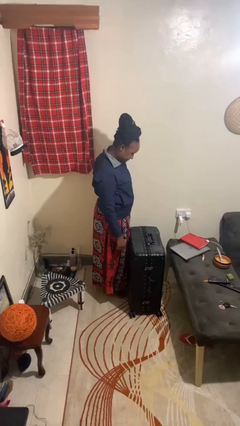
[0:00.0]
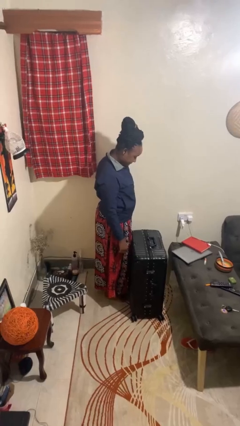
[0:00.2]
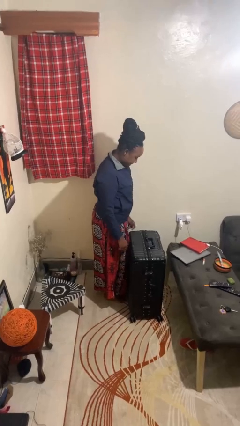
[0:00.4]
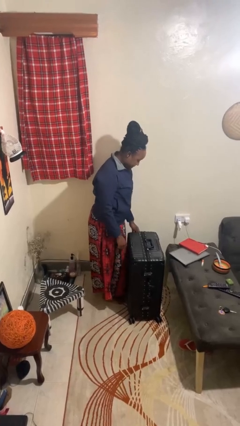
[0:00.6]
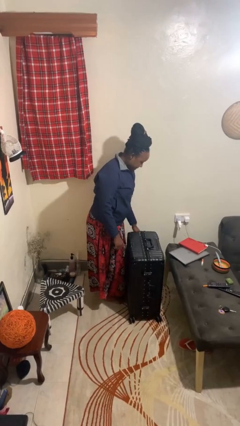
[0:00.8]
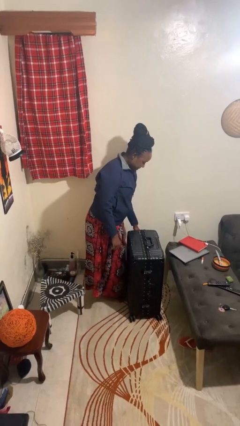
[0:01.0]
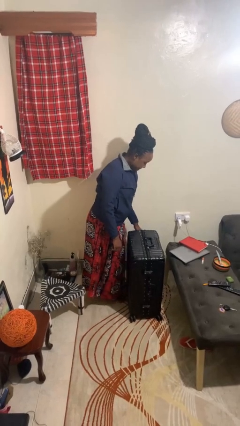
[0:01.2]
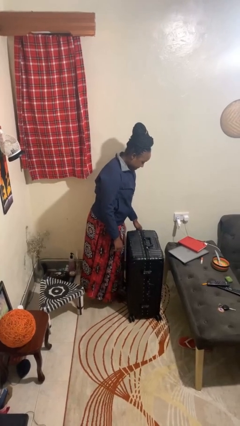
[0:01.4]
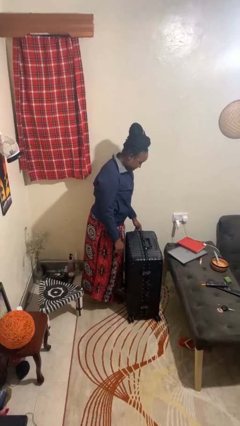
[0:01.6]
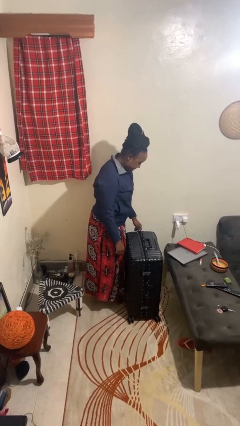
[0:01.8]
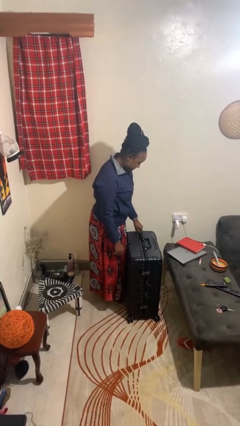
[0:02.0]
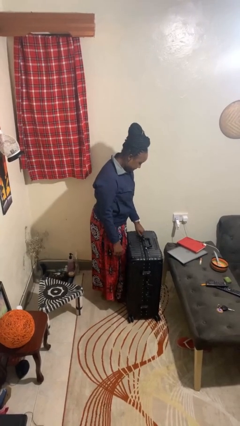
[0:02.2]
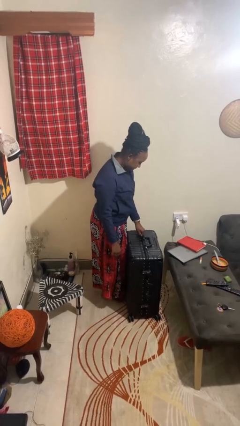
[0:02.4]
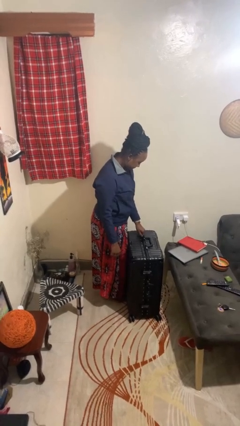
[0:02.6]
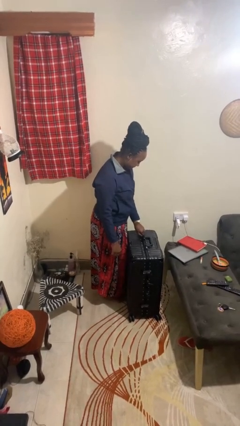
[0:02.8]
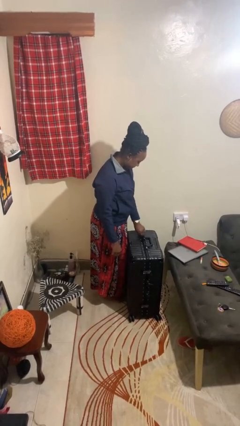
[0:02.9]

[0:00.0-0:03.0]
person opens suitcase

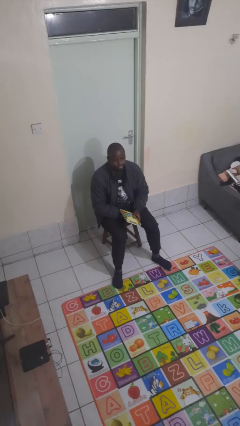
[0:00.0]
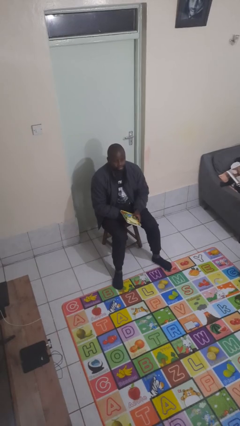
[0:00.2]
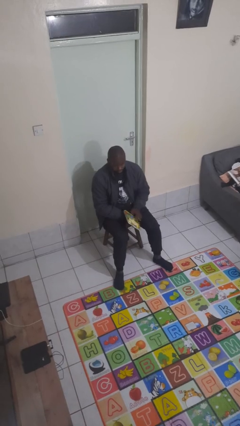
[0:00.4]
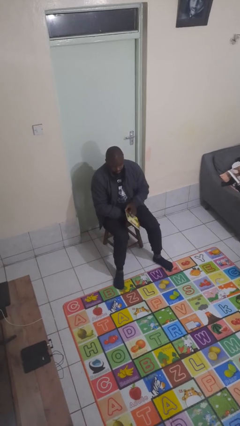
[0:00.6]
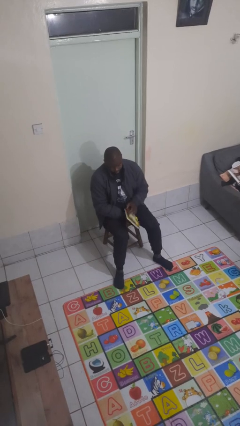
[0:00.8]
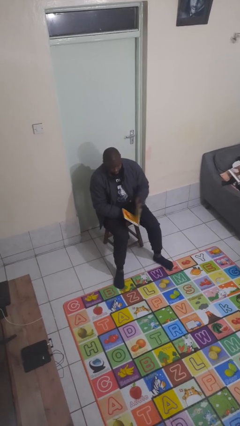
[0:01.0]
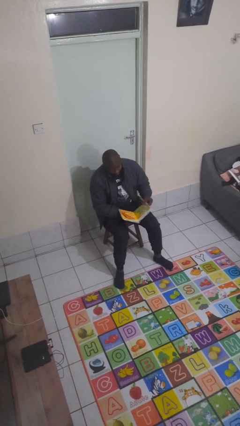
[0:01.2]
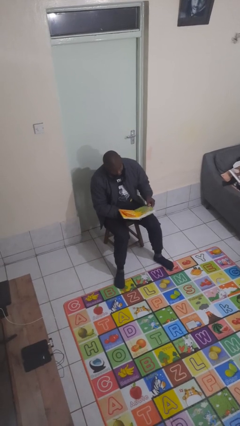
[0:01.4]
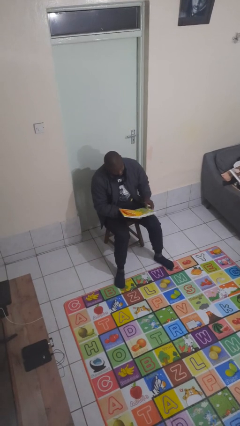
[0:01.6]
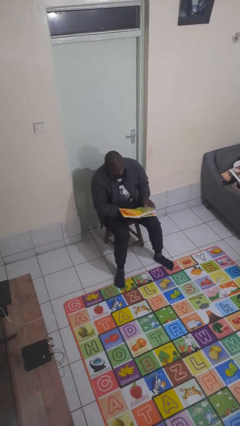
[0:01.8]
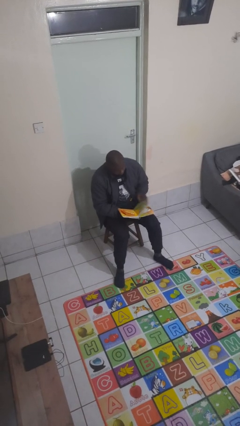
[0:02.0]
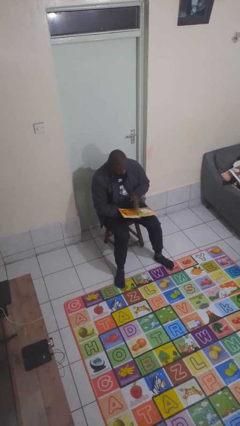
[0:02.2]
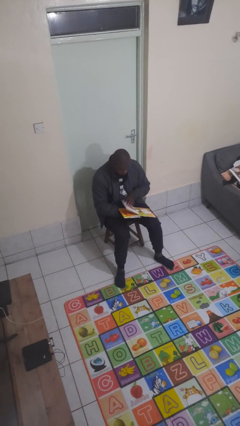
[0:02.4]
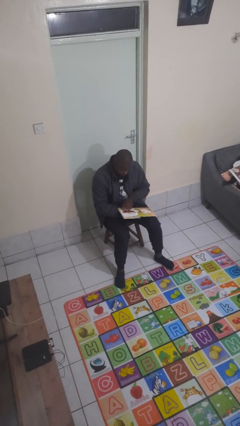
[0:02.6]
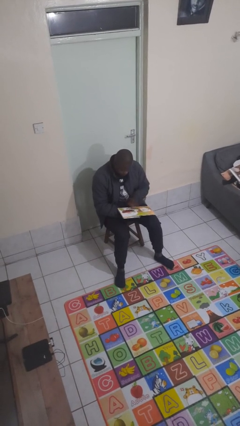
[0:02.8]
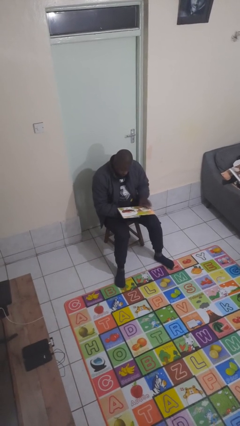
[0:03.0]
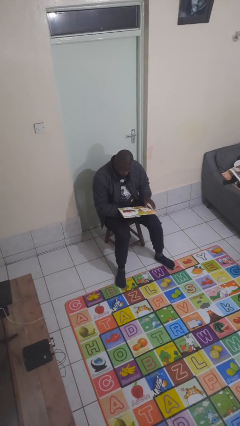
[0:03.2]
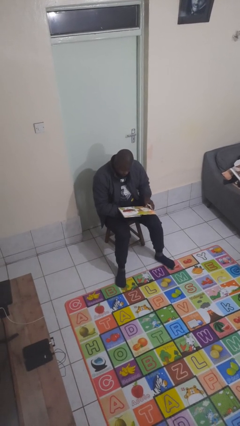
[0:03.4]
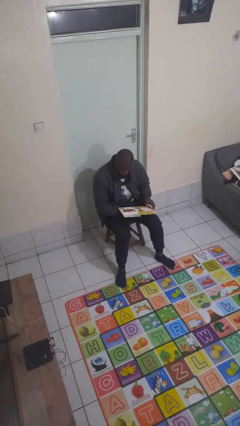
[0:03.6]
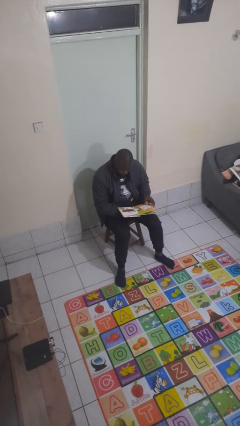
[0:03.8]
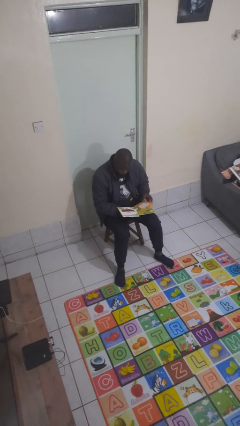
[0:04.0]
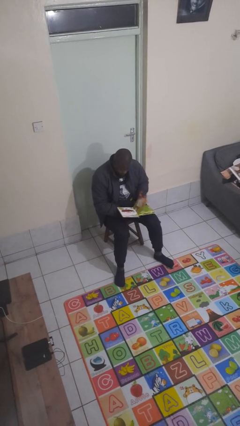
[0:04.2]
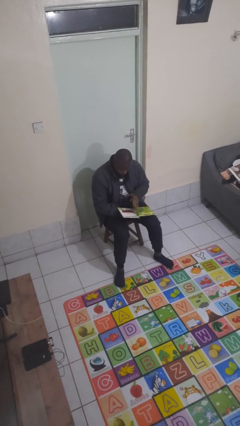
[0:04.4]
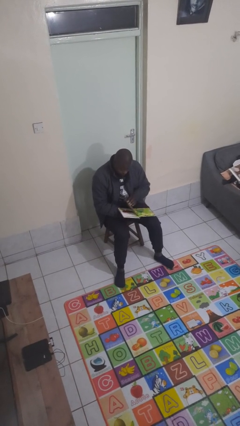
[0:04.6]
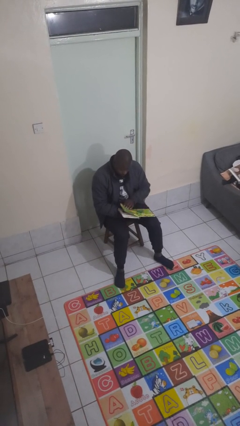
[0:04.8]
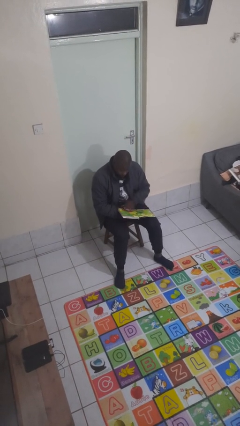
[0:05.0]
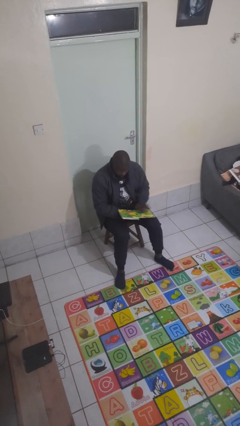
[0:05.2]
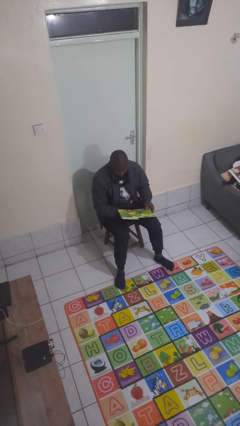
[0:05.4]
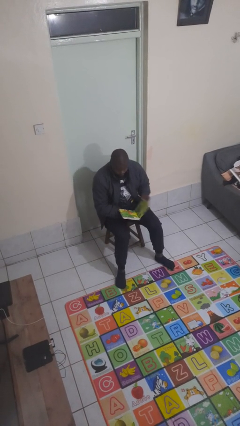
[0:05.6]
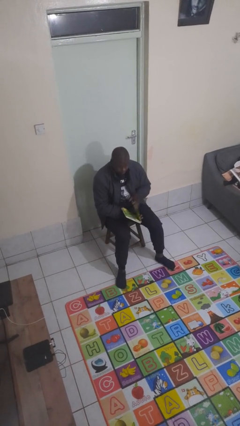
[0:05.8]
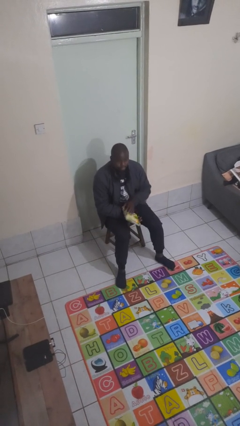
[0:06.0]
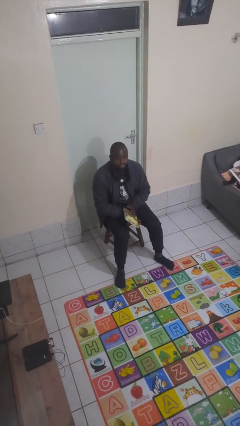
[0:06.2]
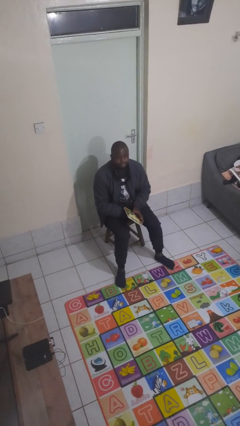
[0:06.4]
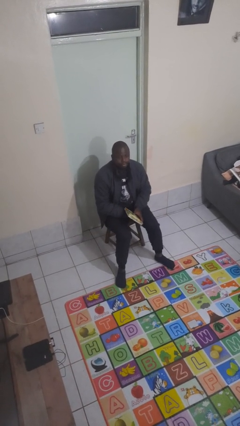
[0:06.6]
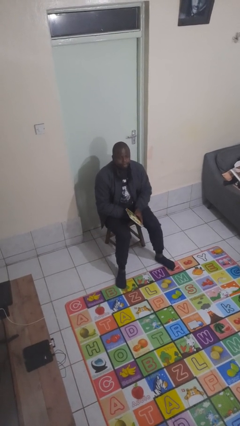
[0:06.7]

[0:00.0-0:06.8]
person reads book

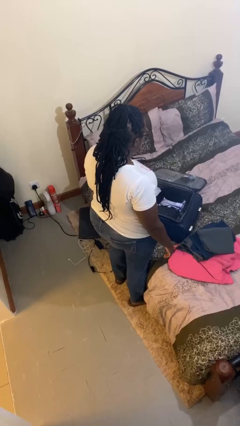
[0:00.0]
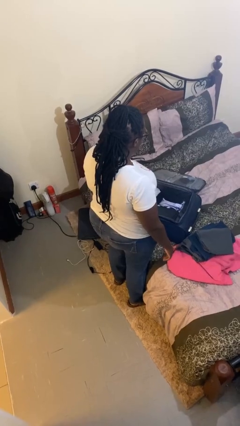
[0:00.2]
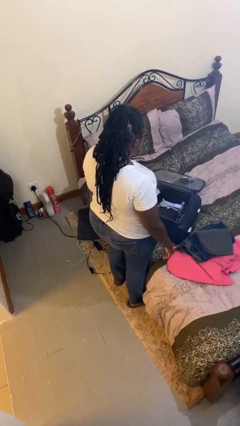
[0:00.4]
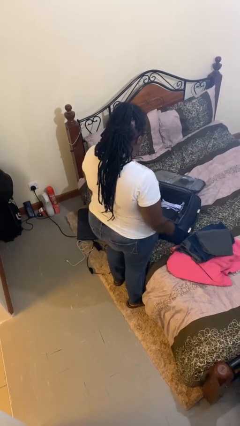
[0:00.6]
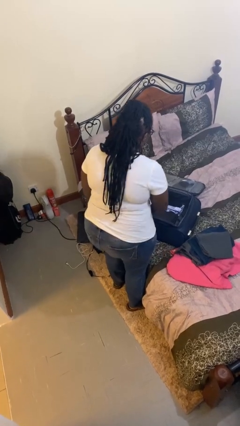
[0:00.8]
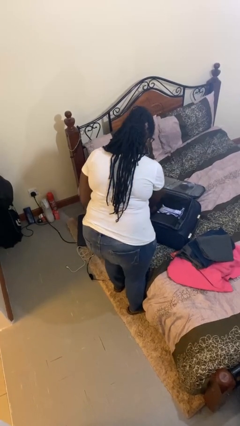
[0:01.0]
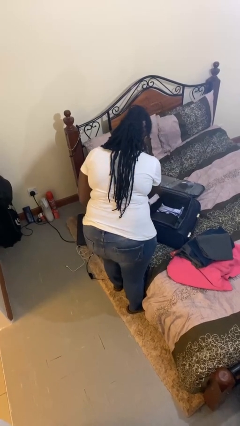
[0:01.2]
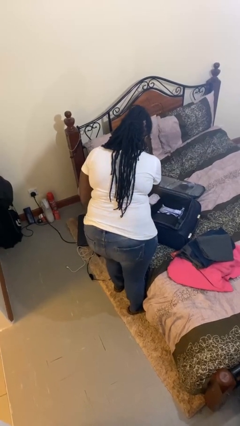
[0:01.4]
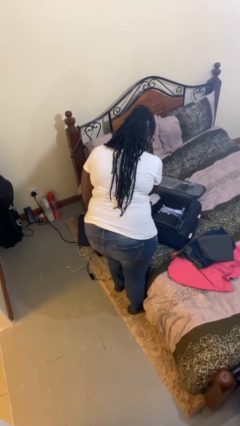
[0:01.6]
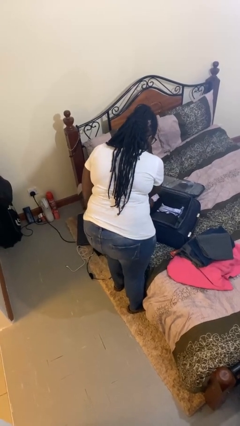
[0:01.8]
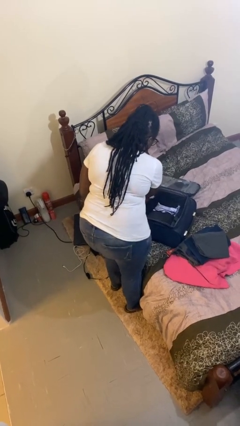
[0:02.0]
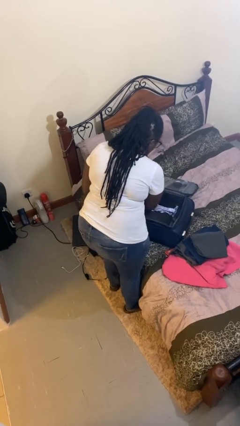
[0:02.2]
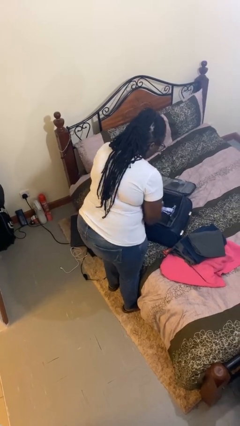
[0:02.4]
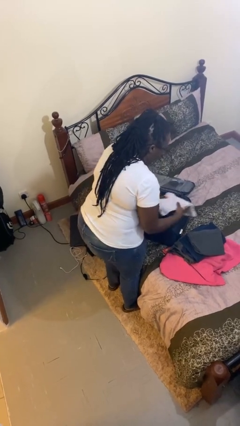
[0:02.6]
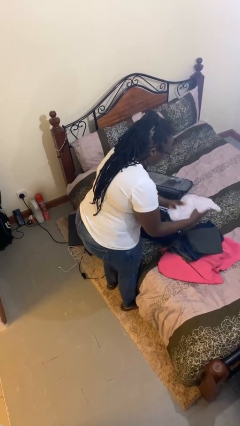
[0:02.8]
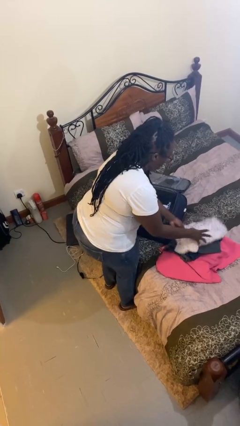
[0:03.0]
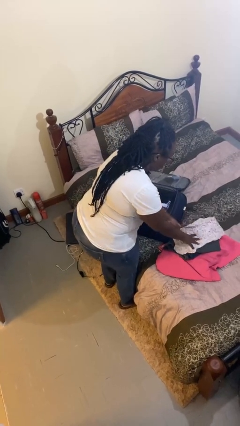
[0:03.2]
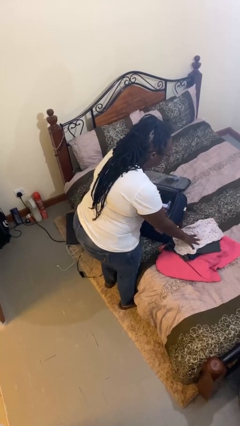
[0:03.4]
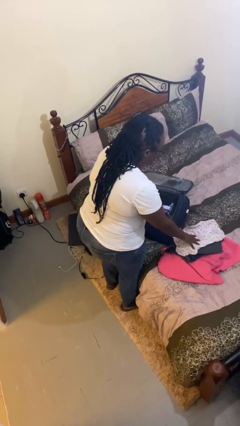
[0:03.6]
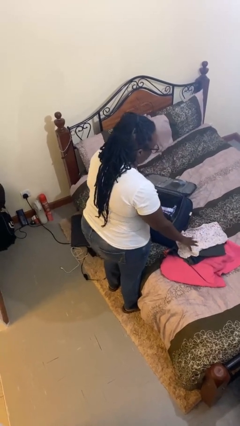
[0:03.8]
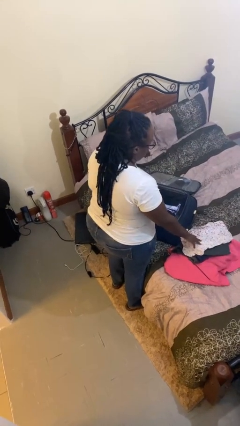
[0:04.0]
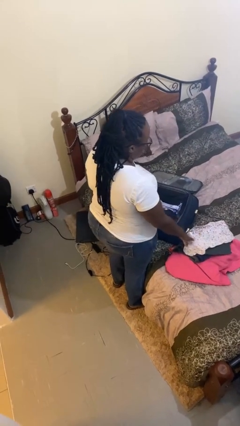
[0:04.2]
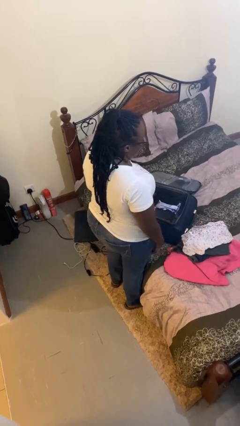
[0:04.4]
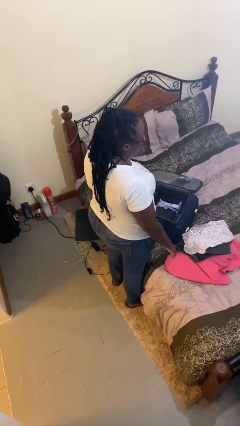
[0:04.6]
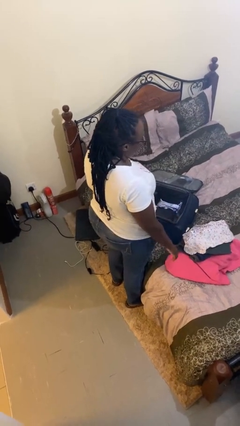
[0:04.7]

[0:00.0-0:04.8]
person unloads clothes from suitcase

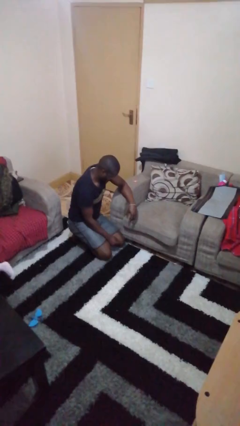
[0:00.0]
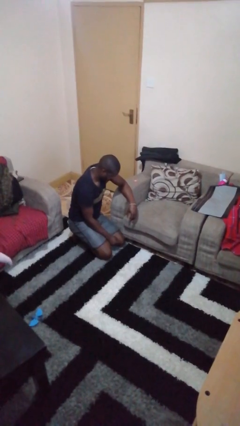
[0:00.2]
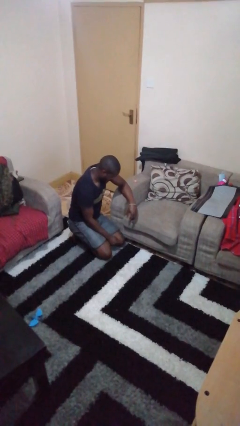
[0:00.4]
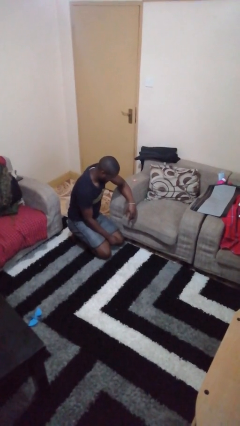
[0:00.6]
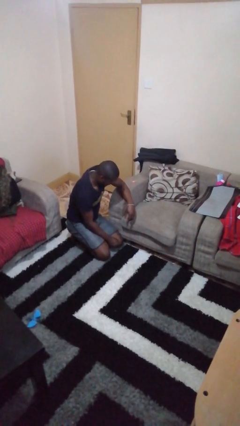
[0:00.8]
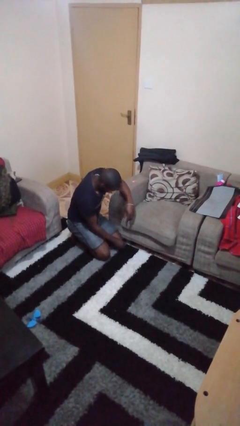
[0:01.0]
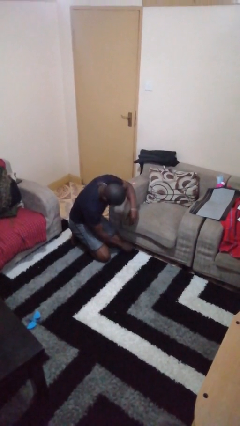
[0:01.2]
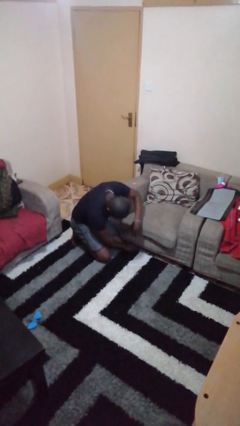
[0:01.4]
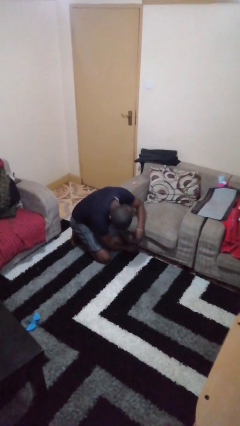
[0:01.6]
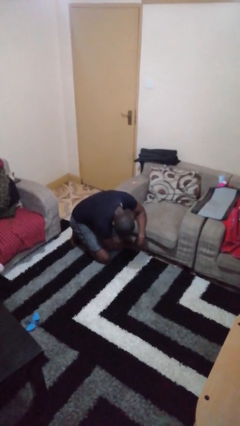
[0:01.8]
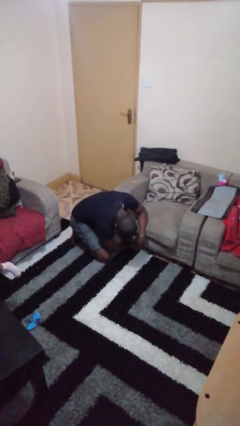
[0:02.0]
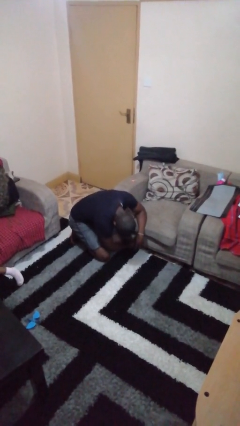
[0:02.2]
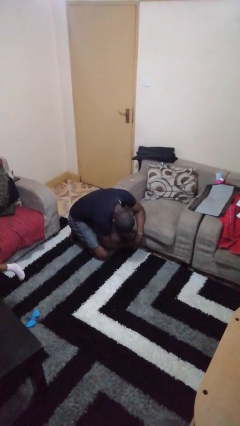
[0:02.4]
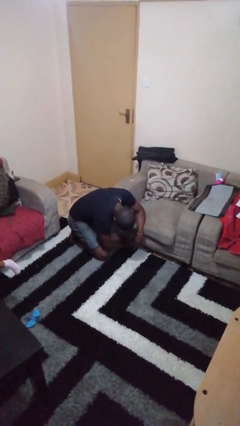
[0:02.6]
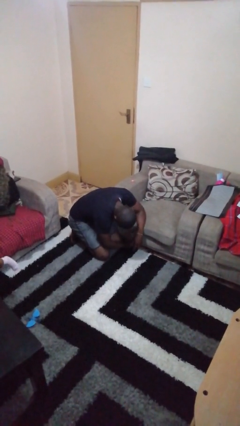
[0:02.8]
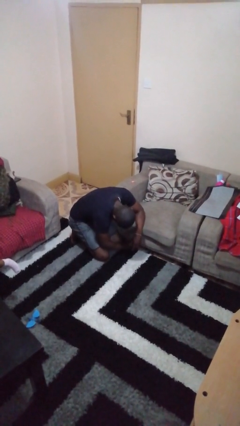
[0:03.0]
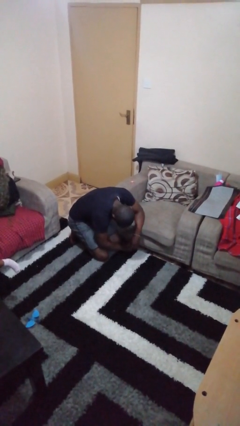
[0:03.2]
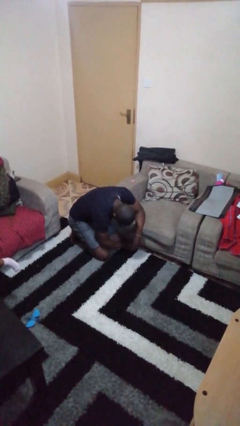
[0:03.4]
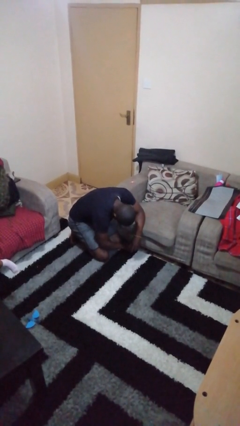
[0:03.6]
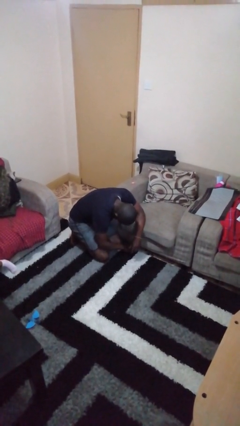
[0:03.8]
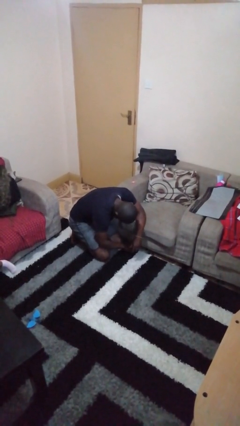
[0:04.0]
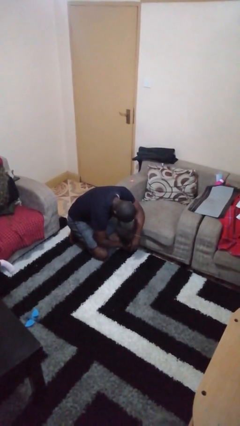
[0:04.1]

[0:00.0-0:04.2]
person searches under couch
